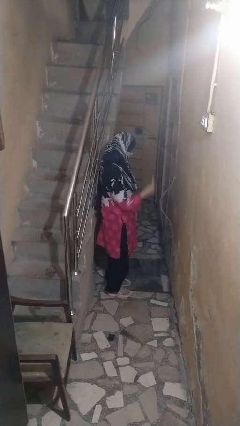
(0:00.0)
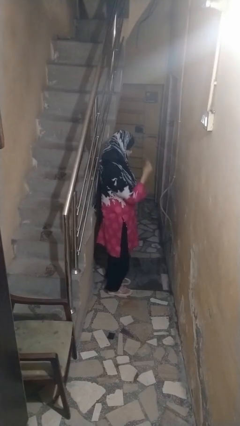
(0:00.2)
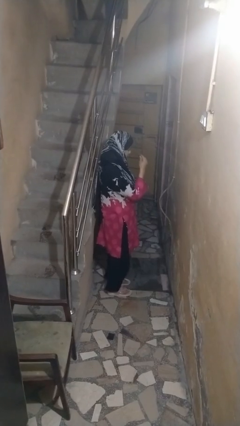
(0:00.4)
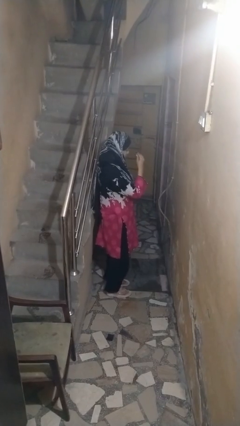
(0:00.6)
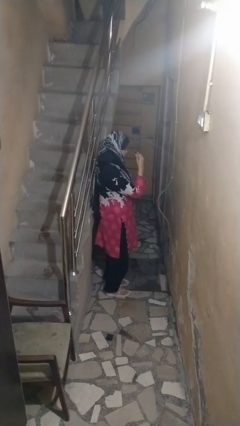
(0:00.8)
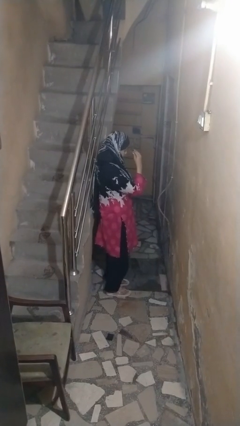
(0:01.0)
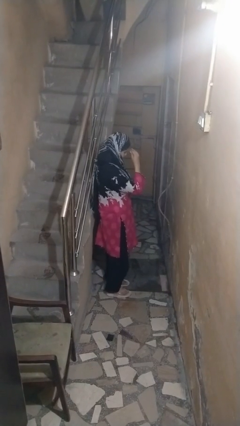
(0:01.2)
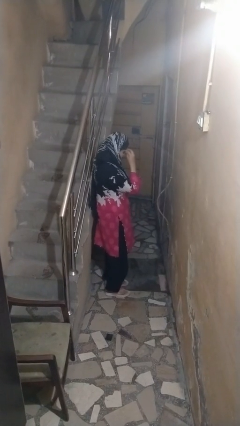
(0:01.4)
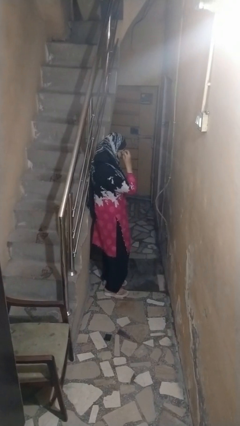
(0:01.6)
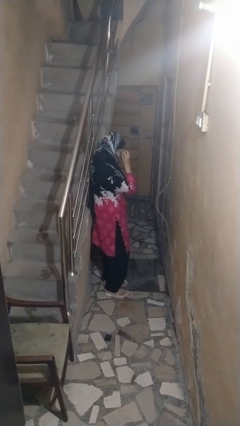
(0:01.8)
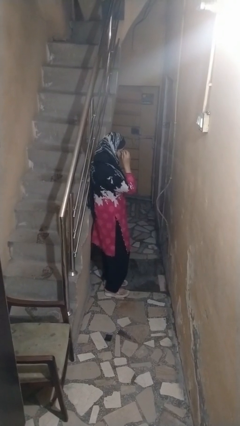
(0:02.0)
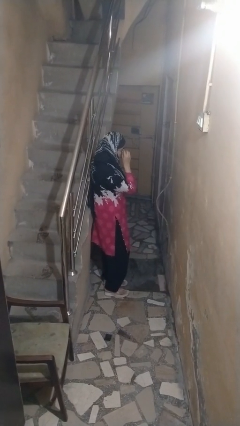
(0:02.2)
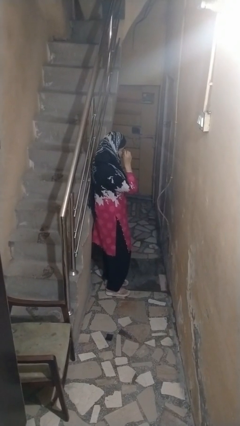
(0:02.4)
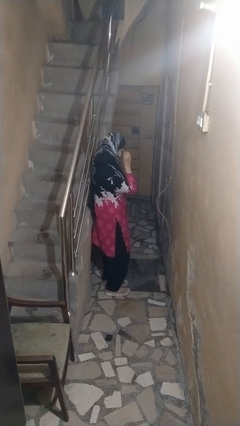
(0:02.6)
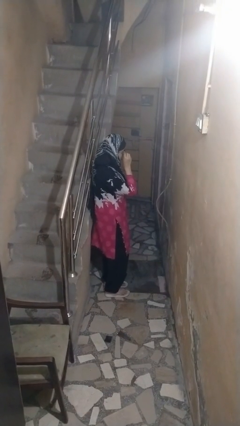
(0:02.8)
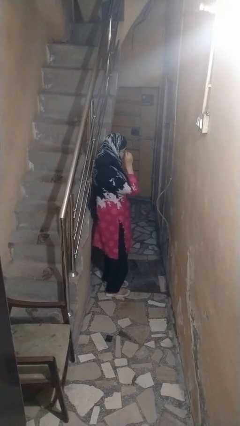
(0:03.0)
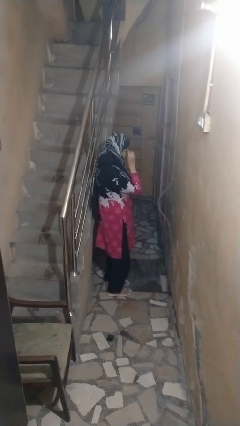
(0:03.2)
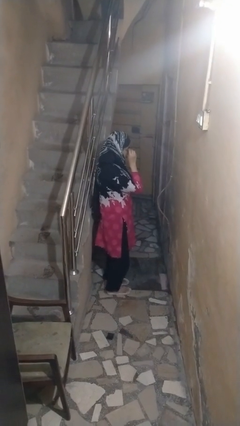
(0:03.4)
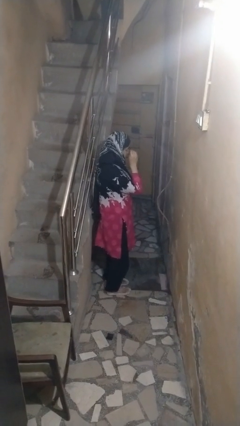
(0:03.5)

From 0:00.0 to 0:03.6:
person puts on glasses

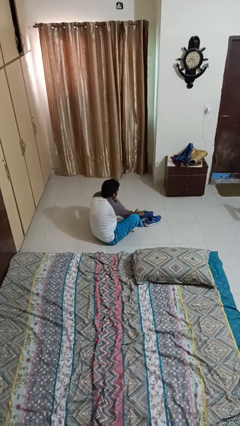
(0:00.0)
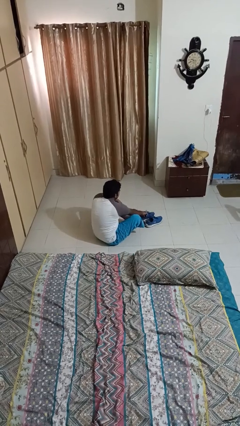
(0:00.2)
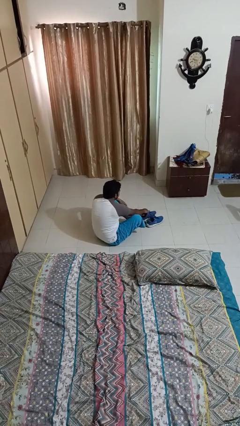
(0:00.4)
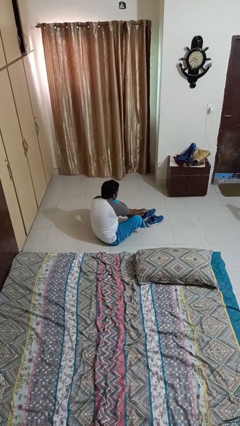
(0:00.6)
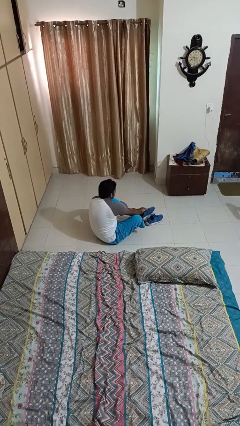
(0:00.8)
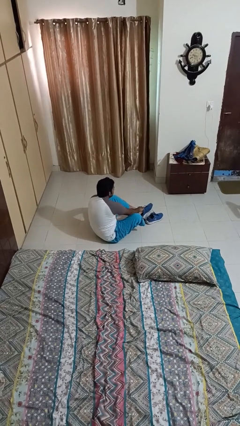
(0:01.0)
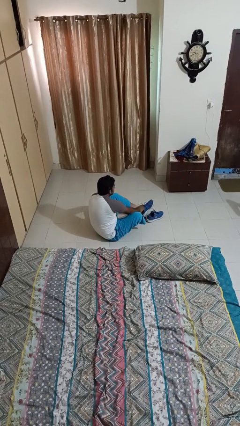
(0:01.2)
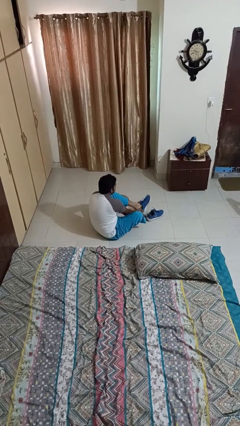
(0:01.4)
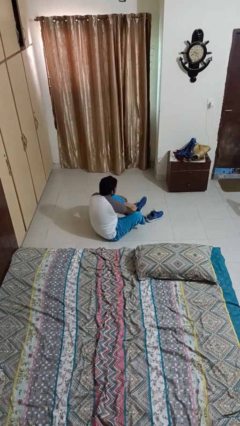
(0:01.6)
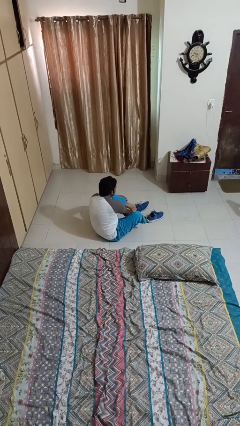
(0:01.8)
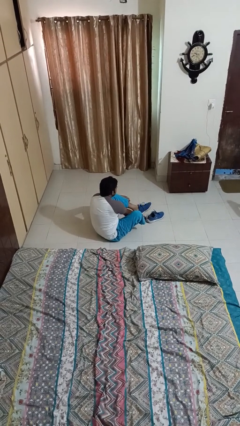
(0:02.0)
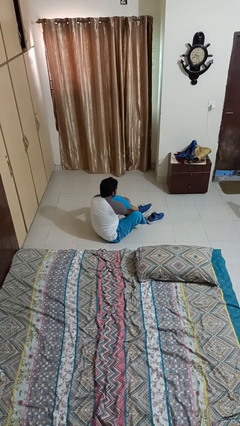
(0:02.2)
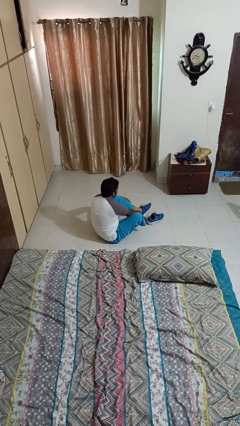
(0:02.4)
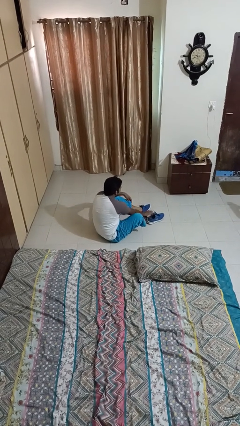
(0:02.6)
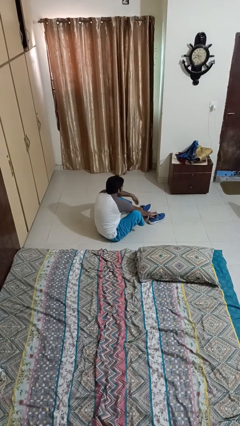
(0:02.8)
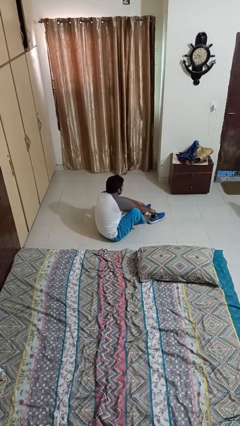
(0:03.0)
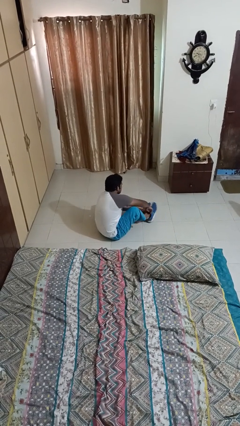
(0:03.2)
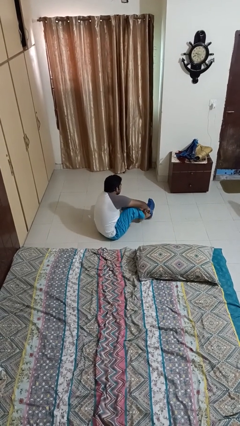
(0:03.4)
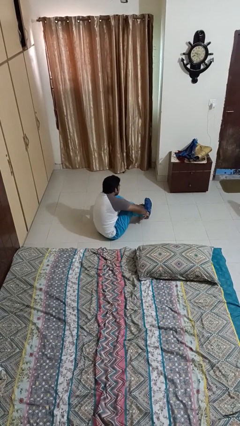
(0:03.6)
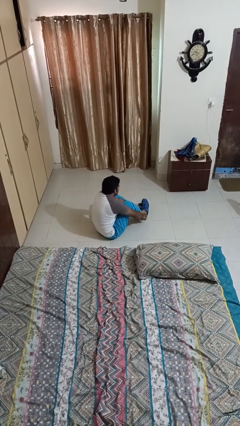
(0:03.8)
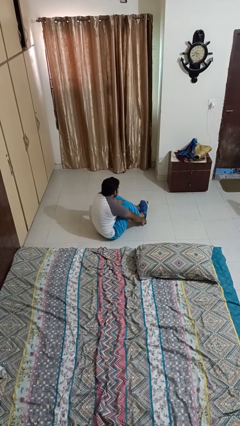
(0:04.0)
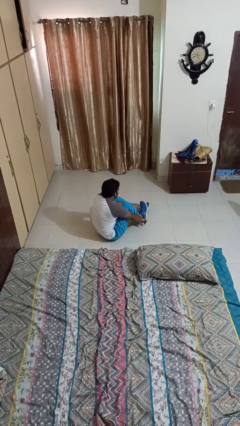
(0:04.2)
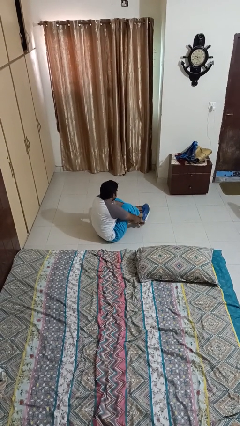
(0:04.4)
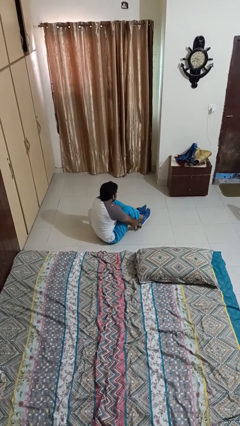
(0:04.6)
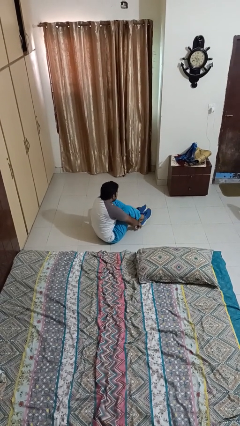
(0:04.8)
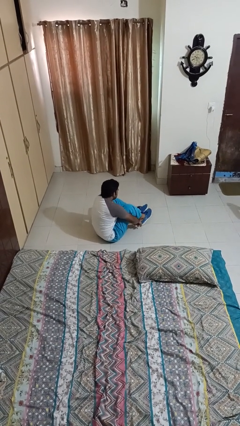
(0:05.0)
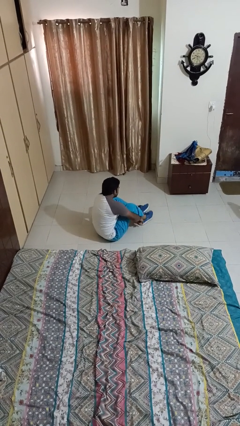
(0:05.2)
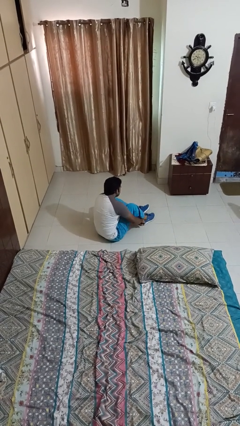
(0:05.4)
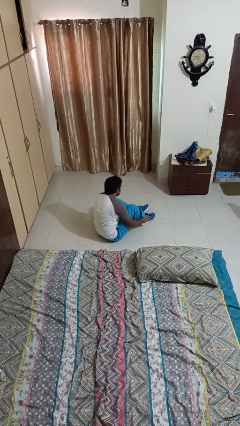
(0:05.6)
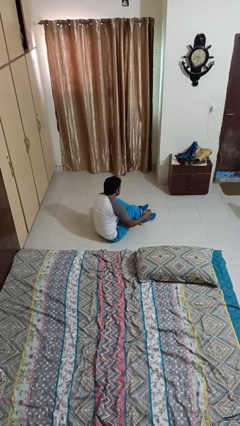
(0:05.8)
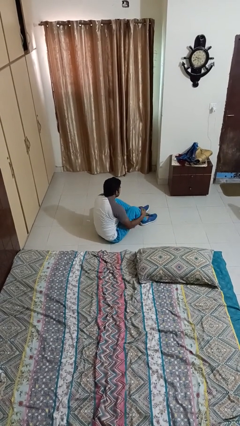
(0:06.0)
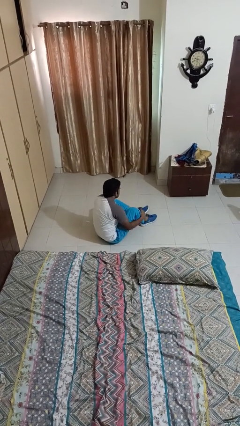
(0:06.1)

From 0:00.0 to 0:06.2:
person puts on shoes

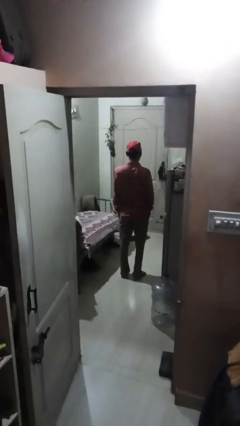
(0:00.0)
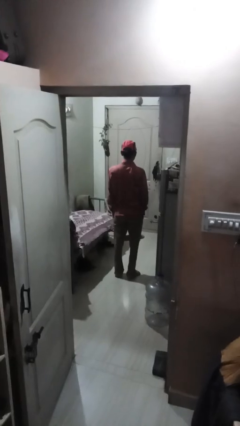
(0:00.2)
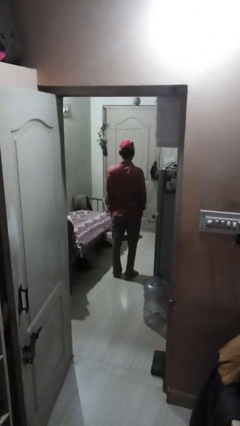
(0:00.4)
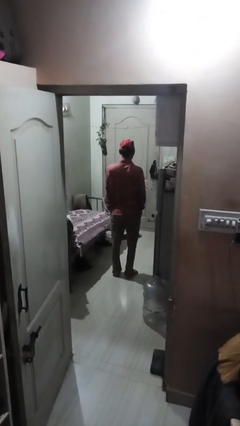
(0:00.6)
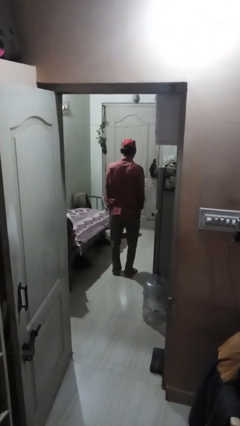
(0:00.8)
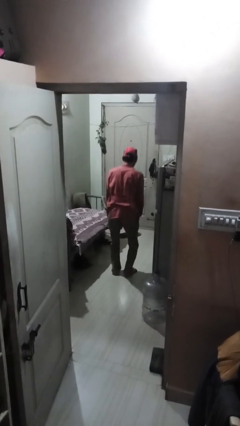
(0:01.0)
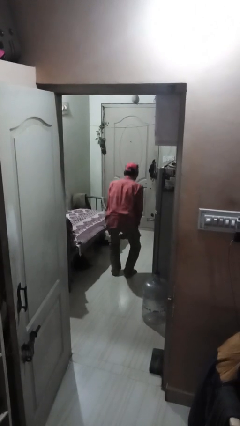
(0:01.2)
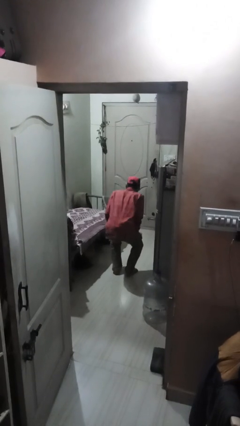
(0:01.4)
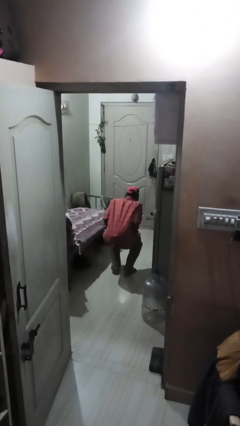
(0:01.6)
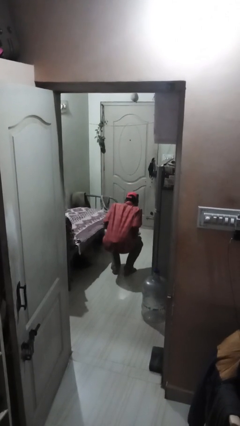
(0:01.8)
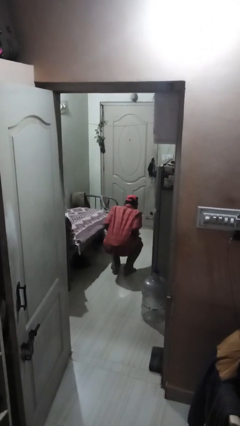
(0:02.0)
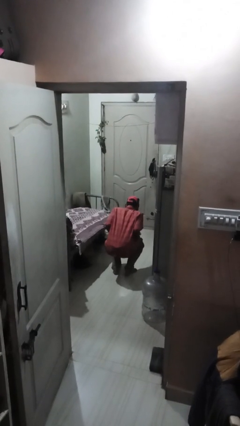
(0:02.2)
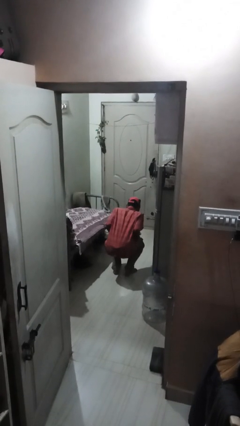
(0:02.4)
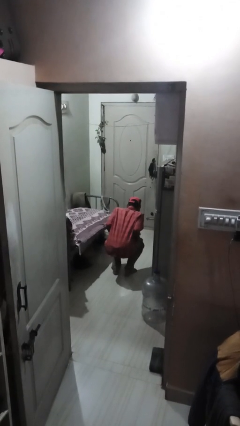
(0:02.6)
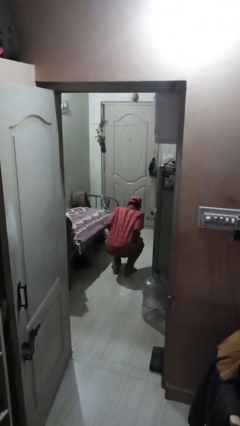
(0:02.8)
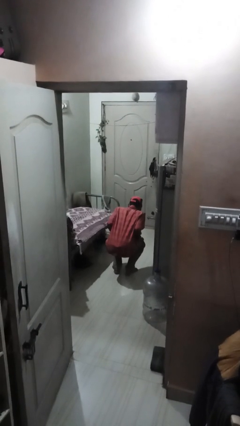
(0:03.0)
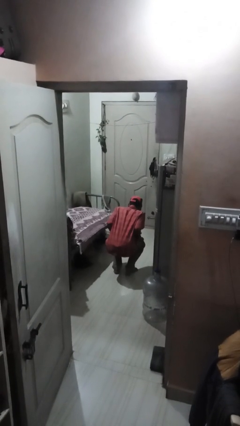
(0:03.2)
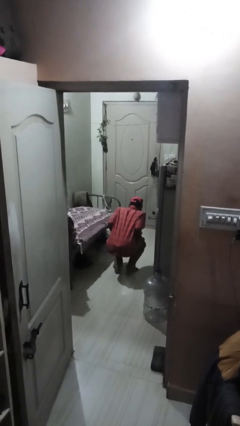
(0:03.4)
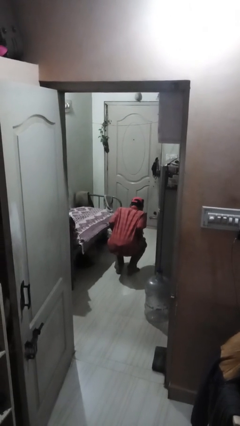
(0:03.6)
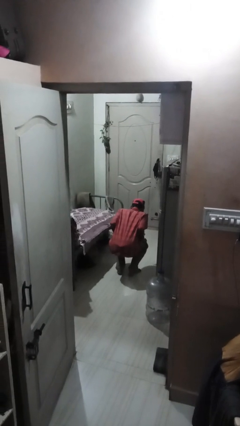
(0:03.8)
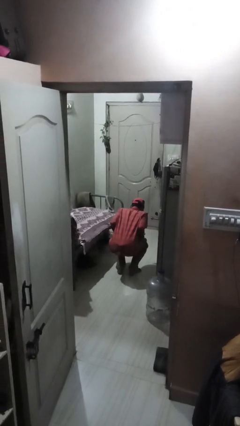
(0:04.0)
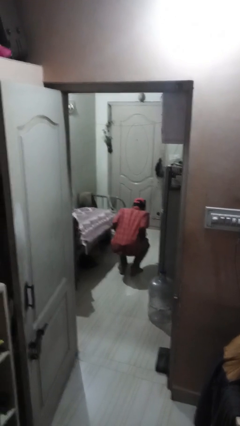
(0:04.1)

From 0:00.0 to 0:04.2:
person squats

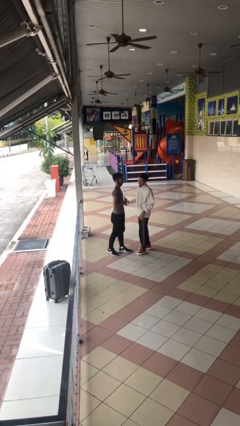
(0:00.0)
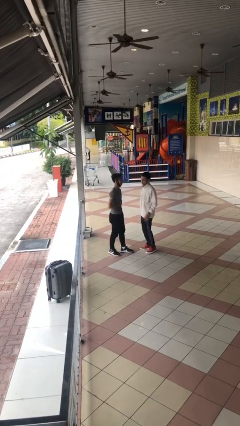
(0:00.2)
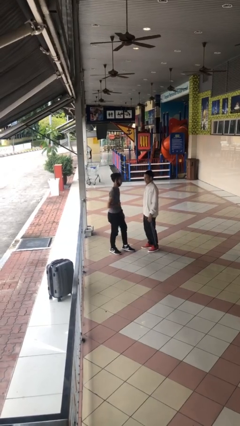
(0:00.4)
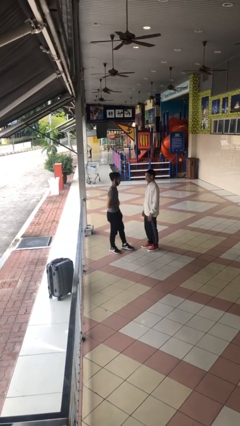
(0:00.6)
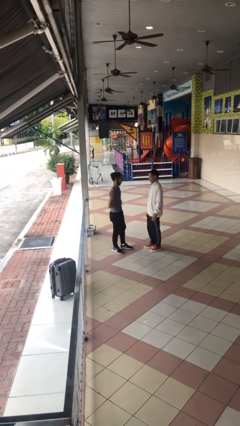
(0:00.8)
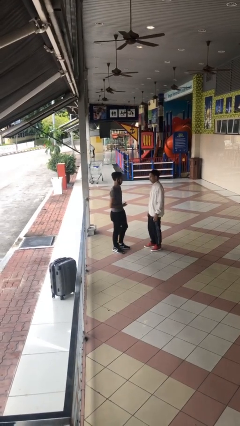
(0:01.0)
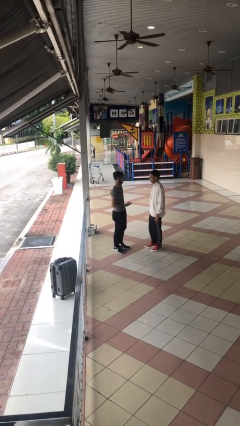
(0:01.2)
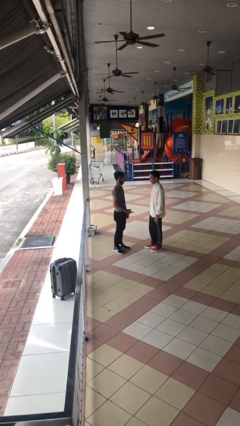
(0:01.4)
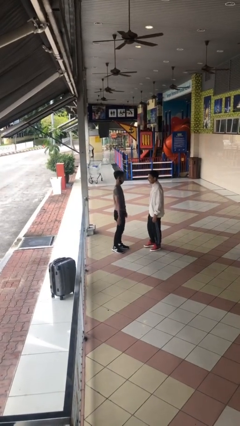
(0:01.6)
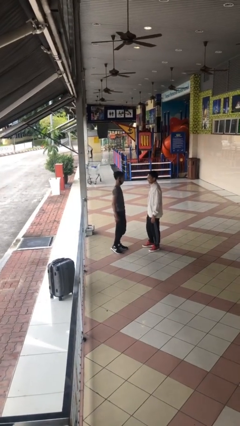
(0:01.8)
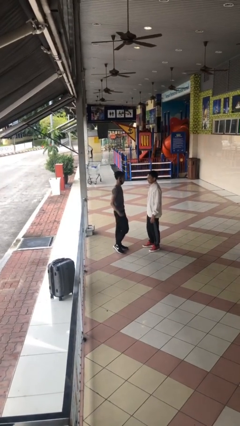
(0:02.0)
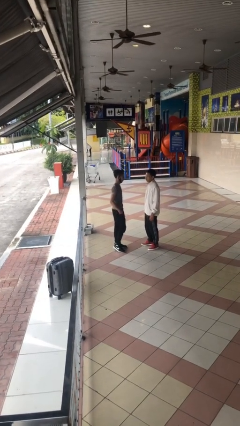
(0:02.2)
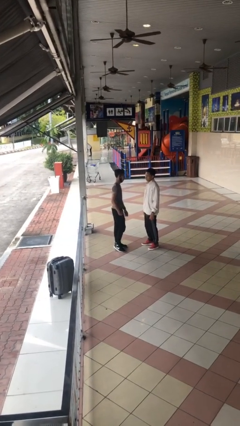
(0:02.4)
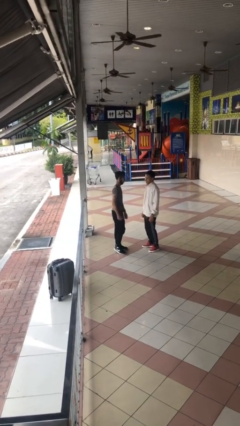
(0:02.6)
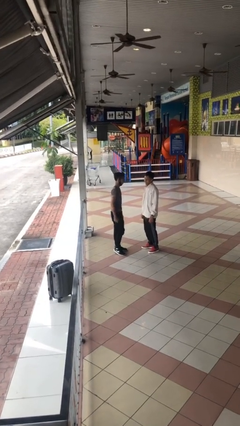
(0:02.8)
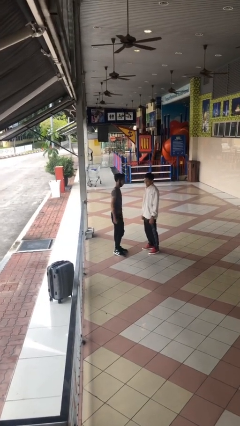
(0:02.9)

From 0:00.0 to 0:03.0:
person talks to person

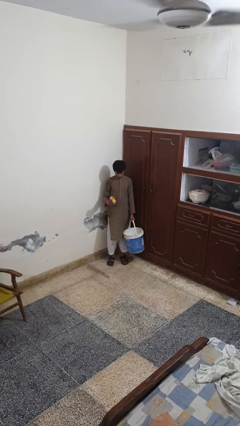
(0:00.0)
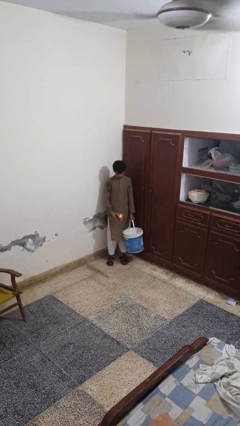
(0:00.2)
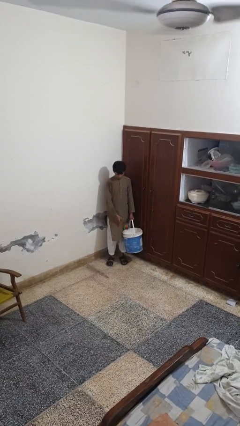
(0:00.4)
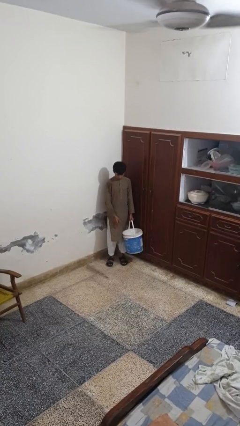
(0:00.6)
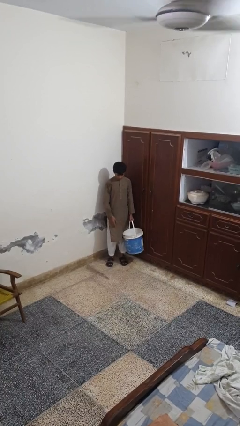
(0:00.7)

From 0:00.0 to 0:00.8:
person puts object into basket
